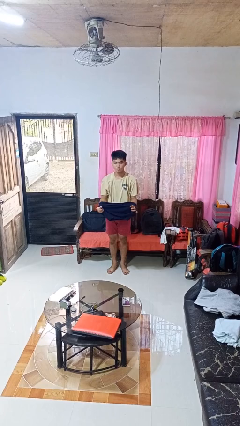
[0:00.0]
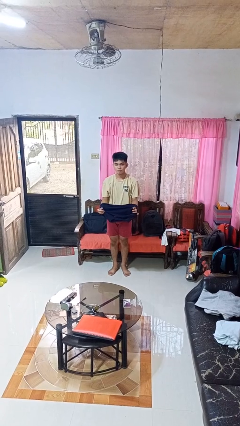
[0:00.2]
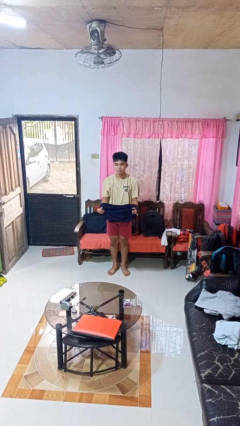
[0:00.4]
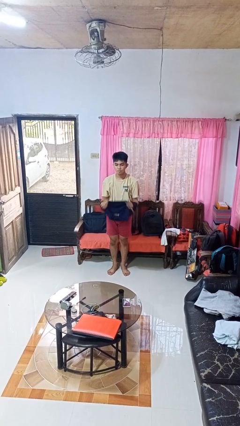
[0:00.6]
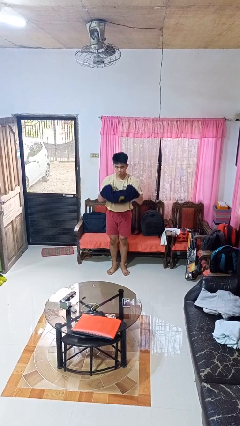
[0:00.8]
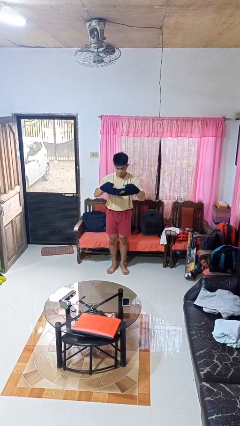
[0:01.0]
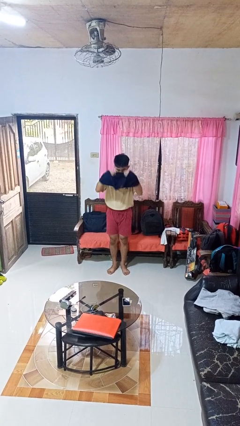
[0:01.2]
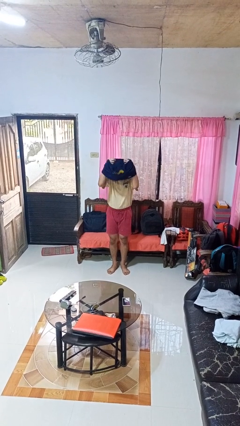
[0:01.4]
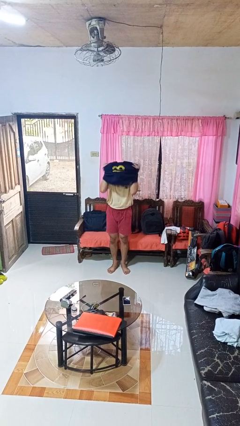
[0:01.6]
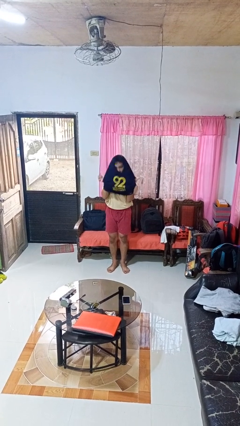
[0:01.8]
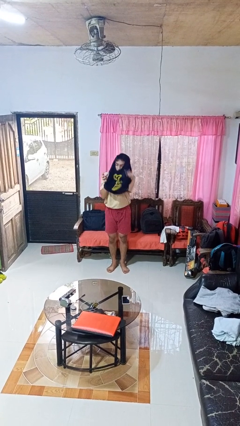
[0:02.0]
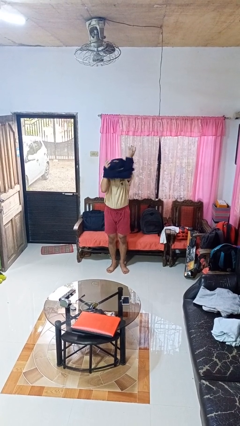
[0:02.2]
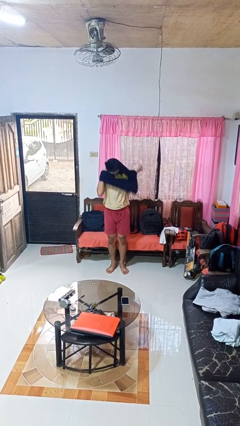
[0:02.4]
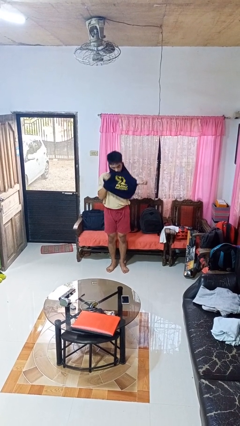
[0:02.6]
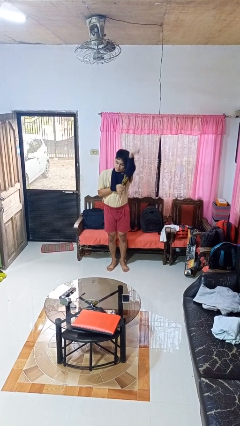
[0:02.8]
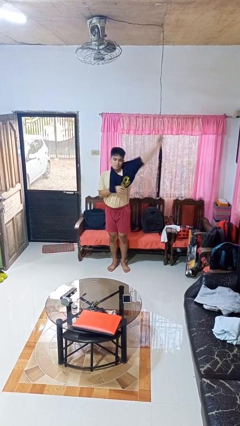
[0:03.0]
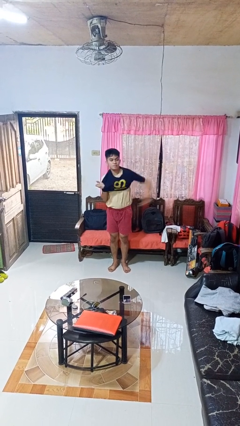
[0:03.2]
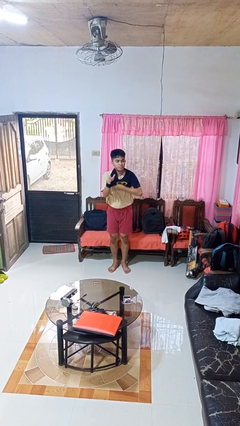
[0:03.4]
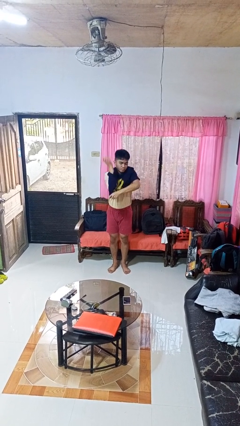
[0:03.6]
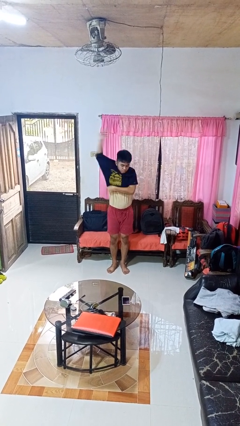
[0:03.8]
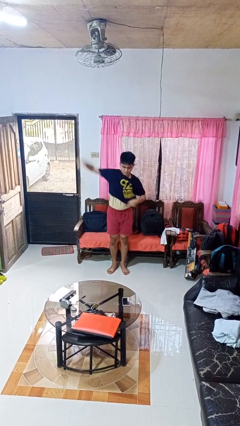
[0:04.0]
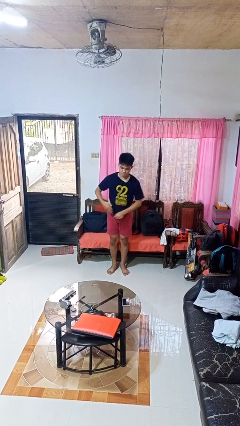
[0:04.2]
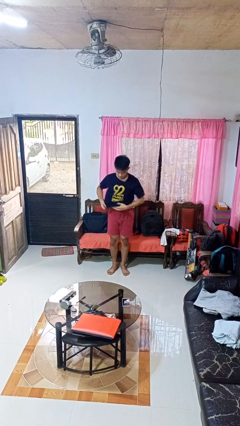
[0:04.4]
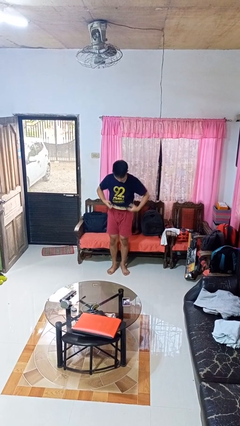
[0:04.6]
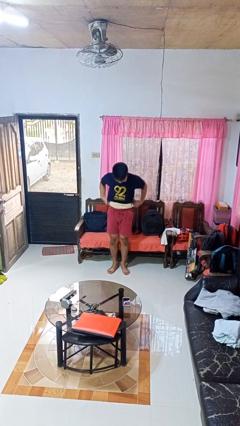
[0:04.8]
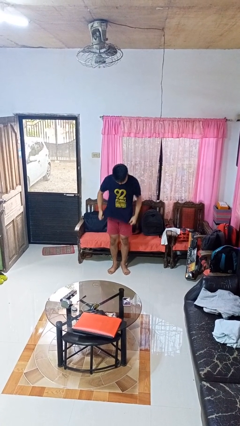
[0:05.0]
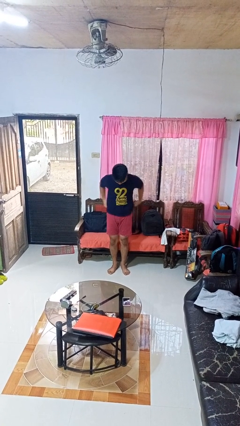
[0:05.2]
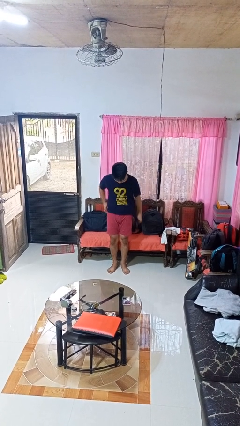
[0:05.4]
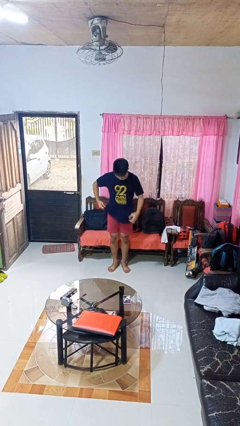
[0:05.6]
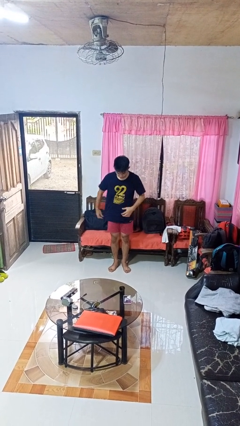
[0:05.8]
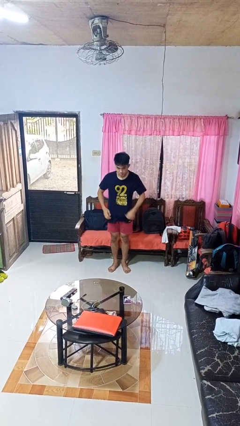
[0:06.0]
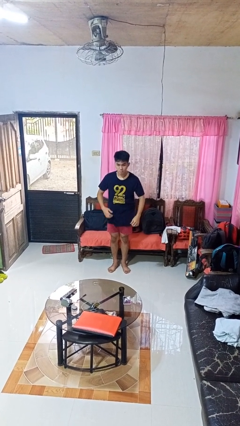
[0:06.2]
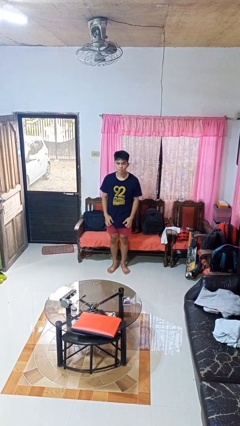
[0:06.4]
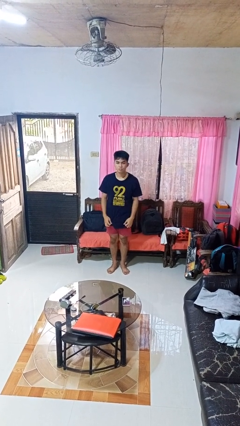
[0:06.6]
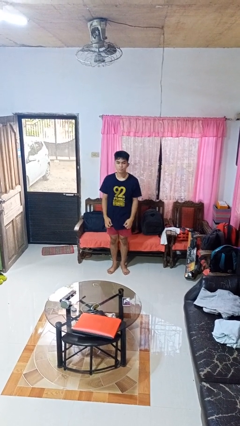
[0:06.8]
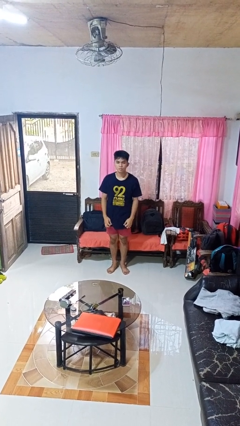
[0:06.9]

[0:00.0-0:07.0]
person puts on shirt

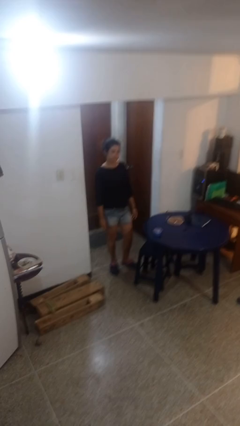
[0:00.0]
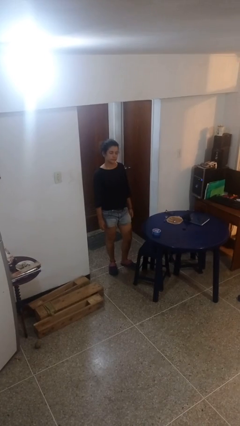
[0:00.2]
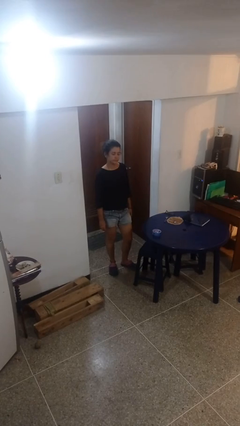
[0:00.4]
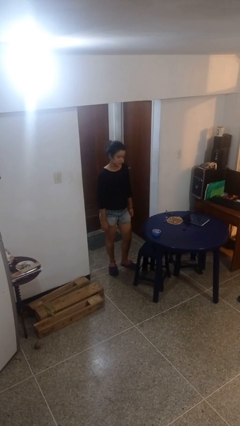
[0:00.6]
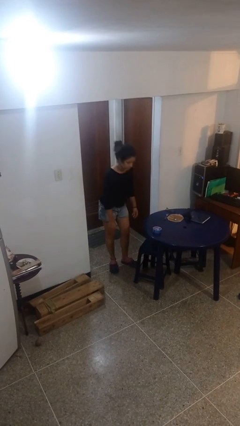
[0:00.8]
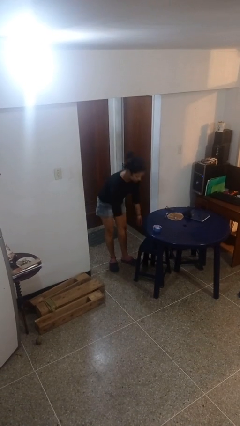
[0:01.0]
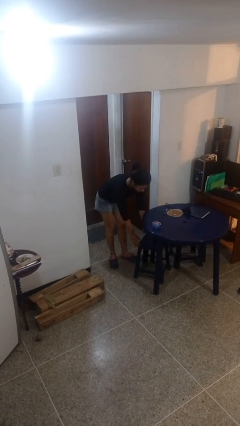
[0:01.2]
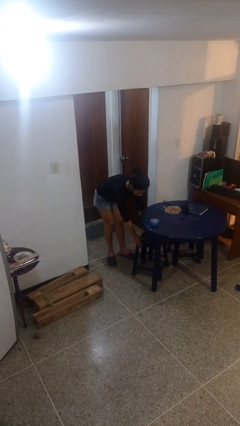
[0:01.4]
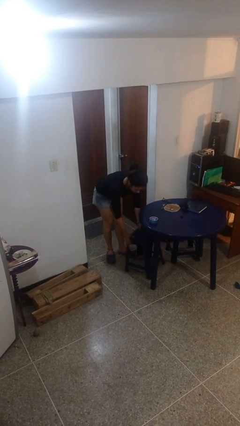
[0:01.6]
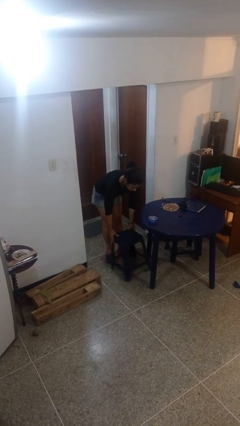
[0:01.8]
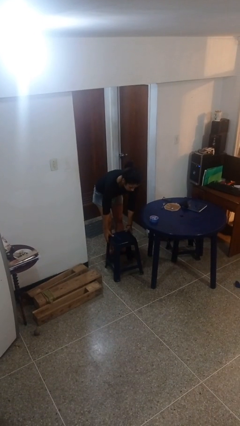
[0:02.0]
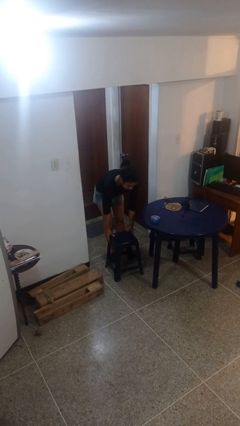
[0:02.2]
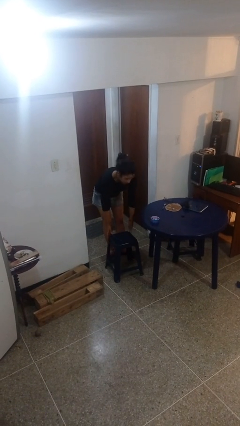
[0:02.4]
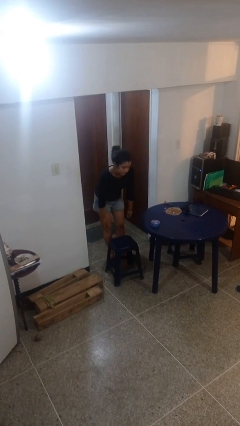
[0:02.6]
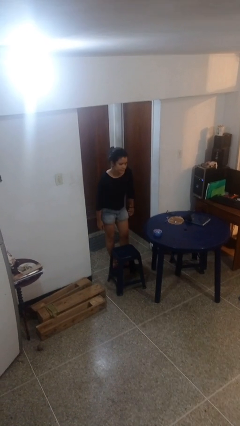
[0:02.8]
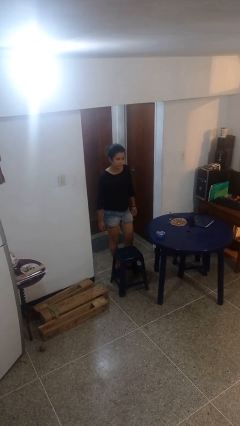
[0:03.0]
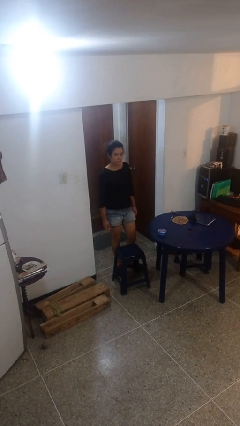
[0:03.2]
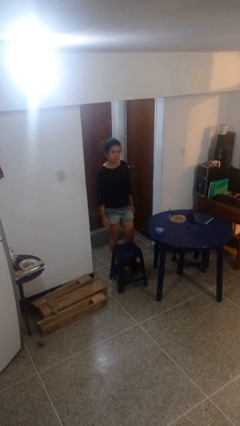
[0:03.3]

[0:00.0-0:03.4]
person pulls out chair

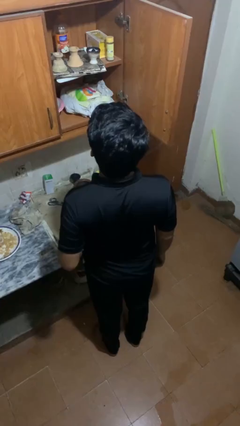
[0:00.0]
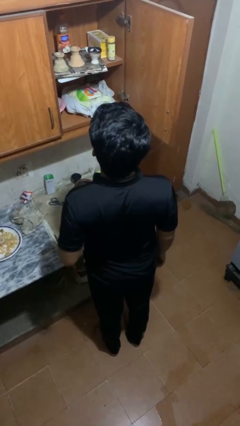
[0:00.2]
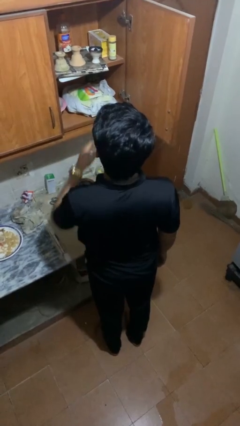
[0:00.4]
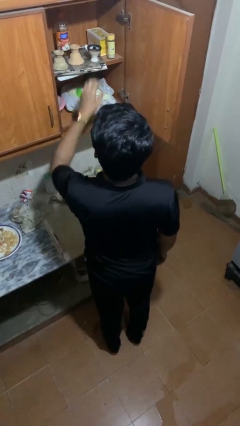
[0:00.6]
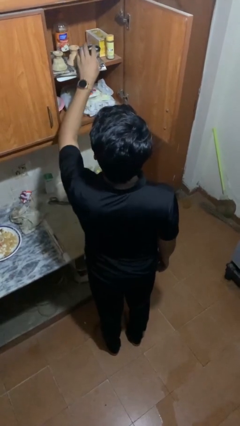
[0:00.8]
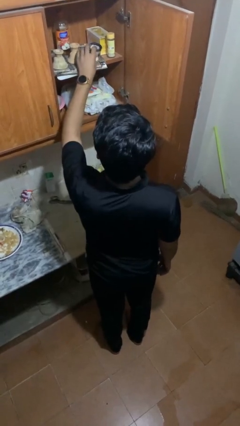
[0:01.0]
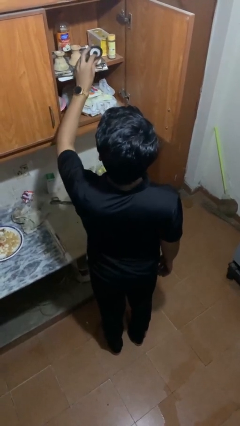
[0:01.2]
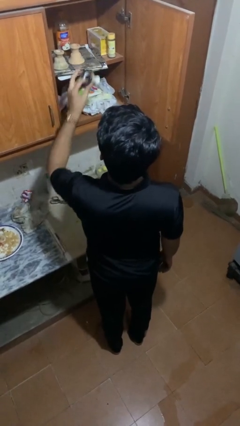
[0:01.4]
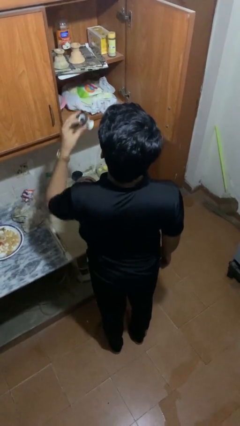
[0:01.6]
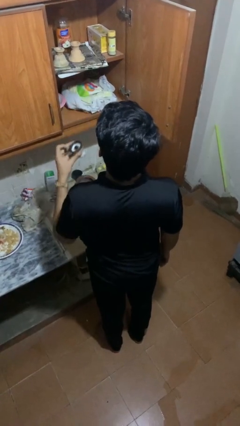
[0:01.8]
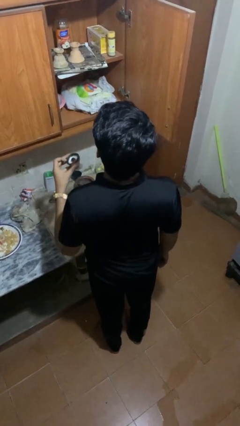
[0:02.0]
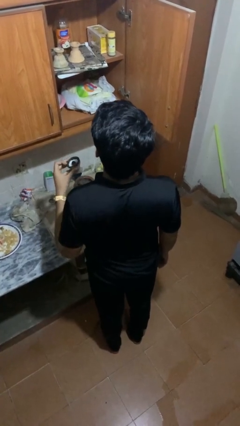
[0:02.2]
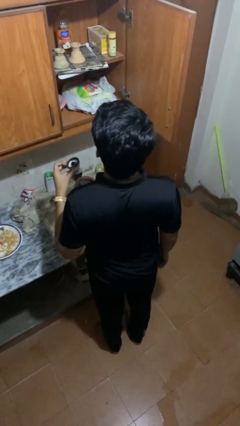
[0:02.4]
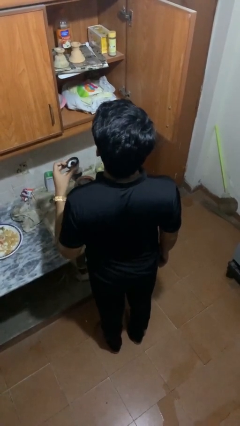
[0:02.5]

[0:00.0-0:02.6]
person takes object from cabinet

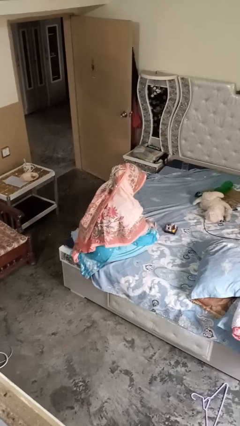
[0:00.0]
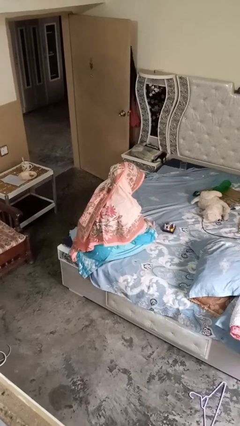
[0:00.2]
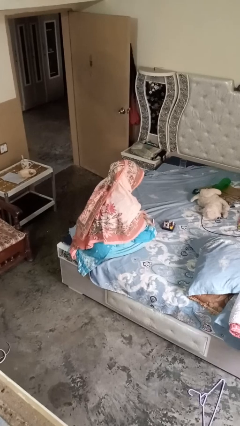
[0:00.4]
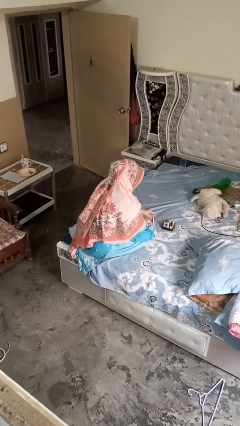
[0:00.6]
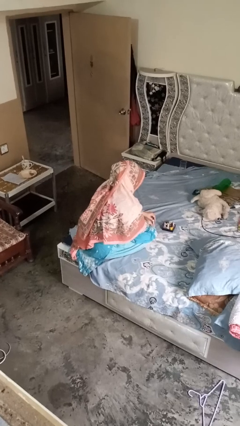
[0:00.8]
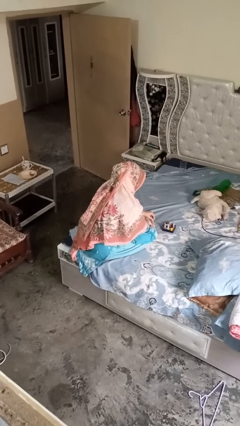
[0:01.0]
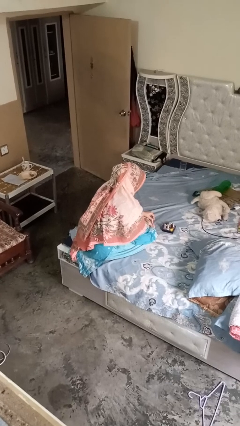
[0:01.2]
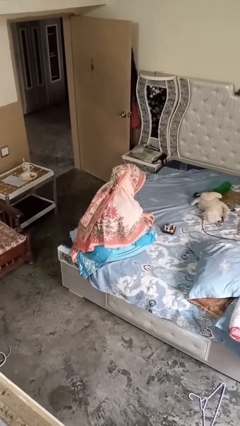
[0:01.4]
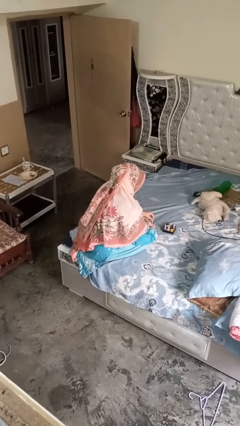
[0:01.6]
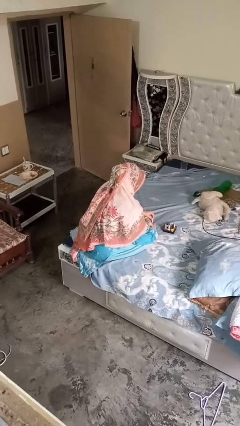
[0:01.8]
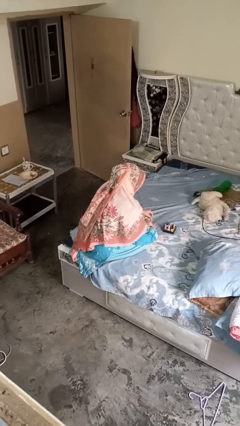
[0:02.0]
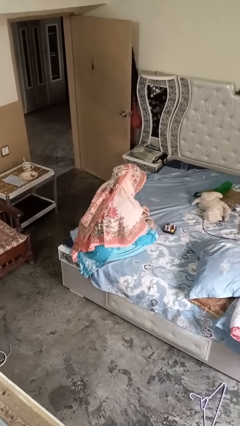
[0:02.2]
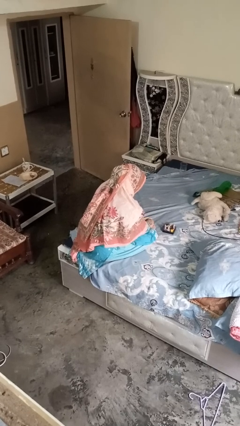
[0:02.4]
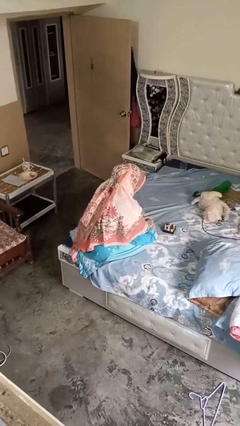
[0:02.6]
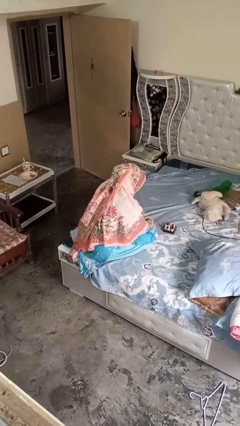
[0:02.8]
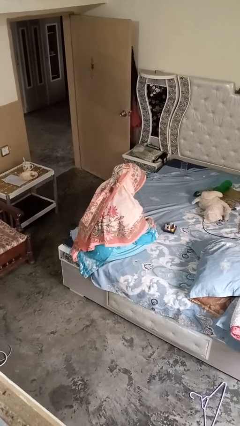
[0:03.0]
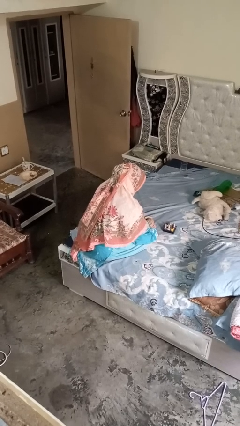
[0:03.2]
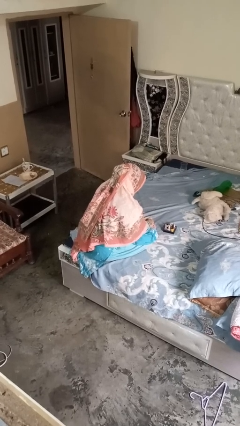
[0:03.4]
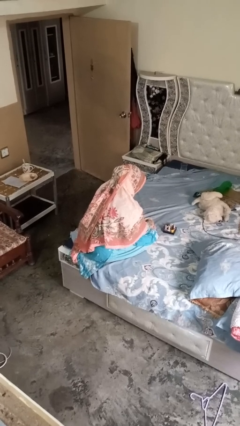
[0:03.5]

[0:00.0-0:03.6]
person paints fingernails

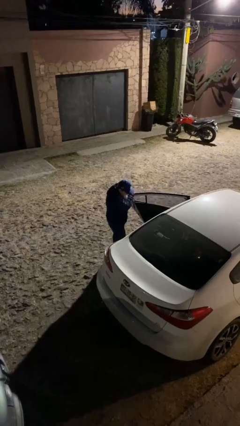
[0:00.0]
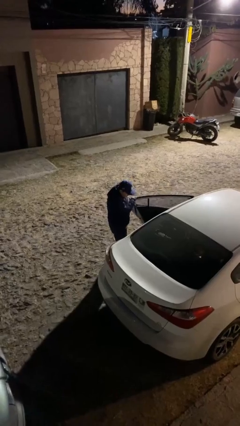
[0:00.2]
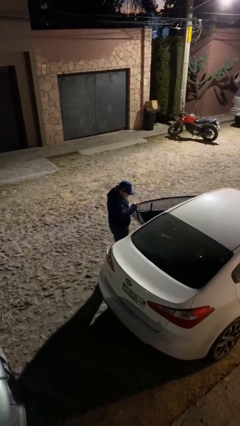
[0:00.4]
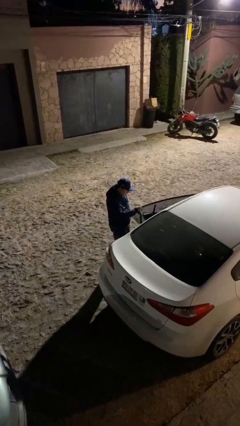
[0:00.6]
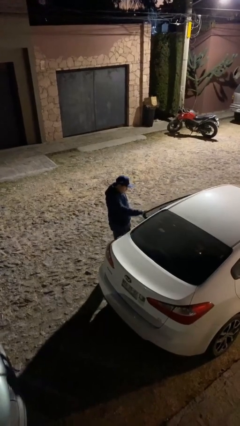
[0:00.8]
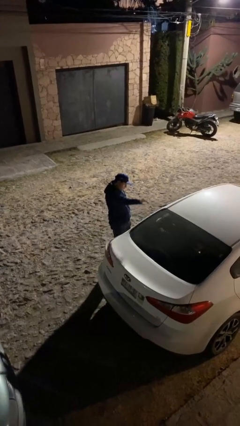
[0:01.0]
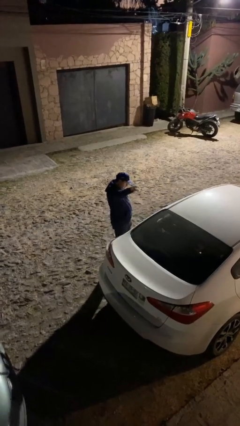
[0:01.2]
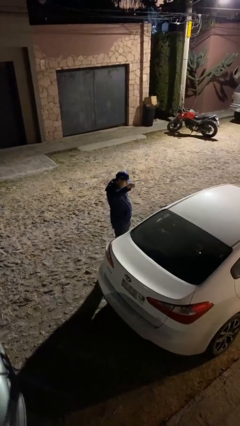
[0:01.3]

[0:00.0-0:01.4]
person closes car door
